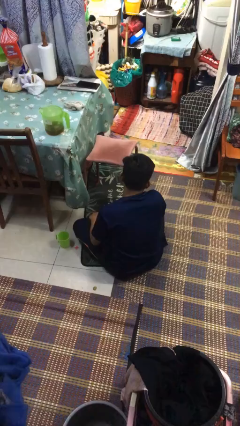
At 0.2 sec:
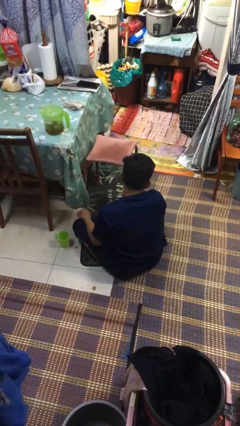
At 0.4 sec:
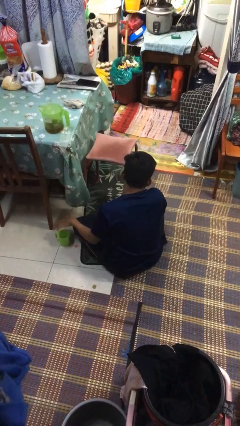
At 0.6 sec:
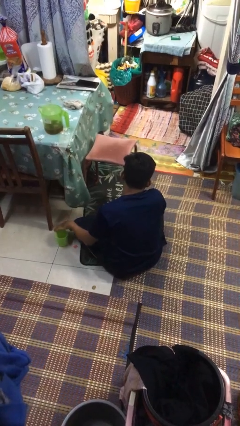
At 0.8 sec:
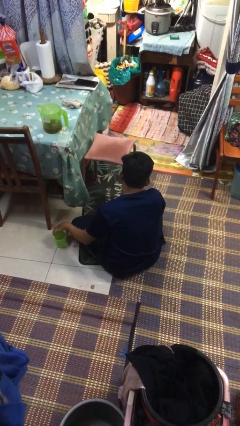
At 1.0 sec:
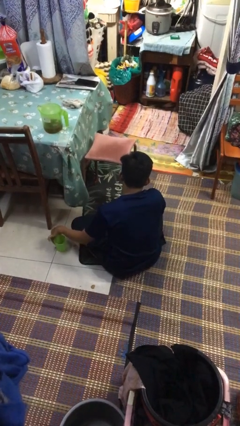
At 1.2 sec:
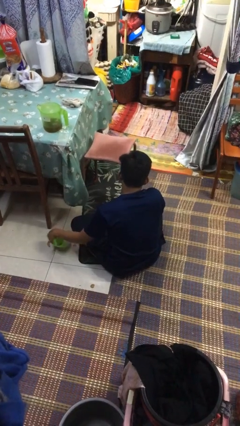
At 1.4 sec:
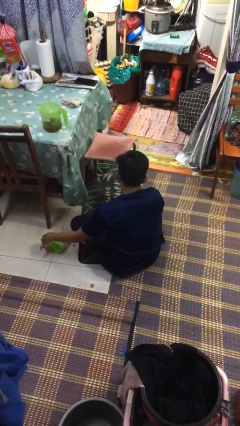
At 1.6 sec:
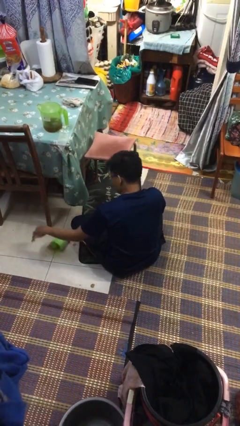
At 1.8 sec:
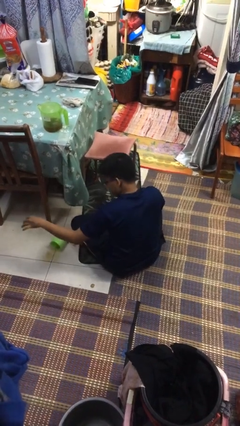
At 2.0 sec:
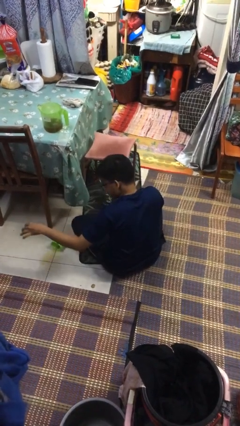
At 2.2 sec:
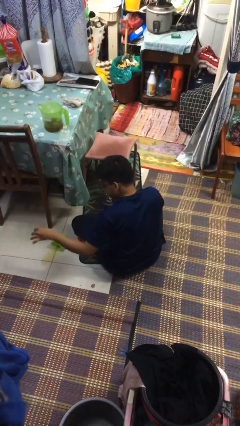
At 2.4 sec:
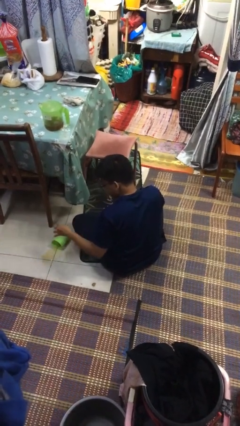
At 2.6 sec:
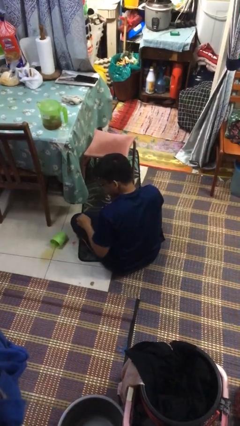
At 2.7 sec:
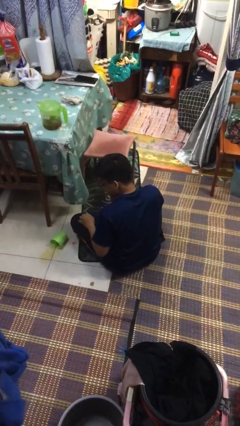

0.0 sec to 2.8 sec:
person spills on floor

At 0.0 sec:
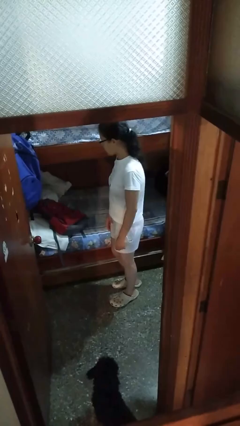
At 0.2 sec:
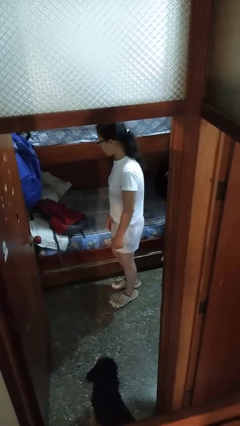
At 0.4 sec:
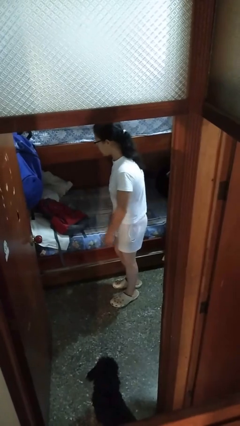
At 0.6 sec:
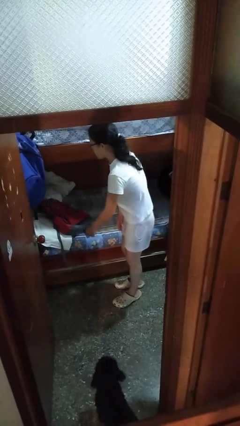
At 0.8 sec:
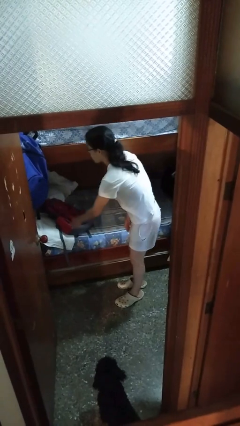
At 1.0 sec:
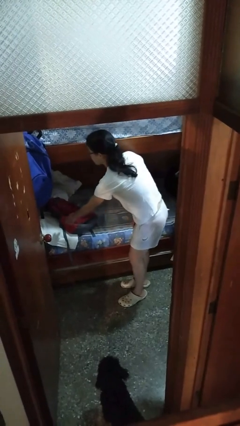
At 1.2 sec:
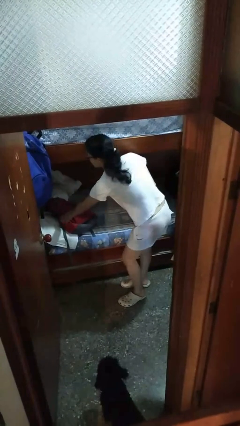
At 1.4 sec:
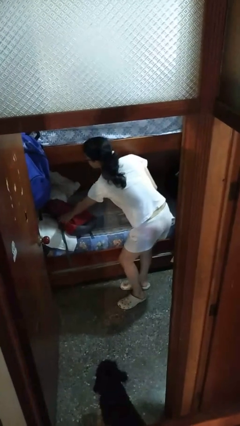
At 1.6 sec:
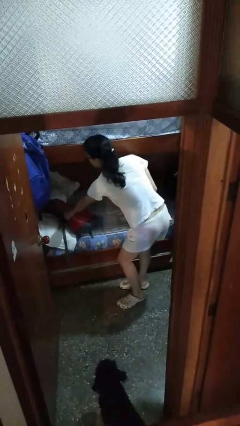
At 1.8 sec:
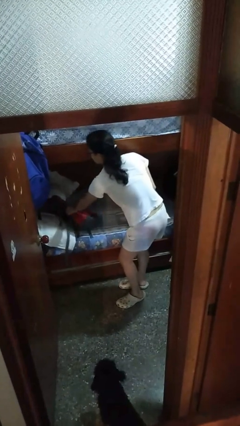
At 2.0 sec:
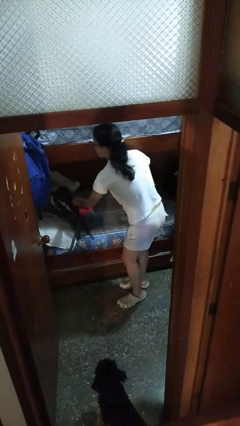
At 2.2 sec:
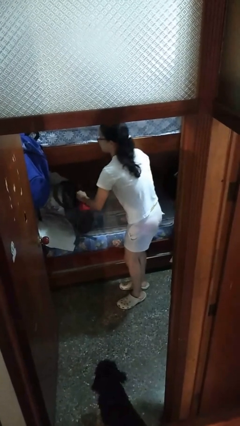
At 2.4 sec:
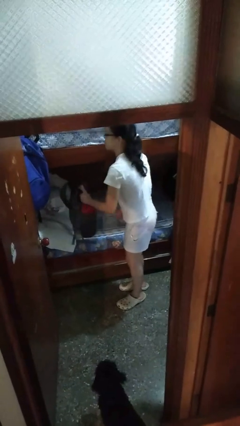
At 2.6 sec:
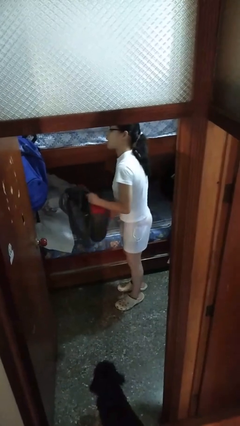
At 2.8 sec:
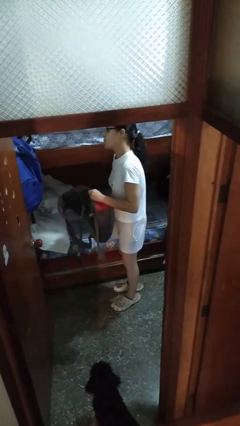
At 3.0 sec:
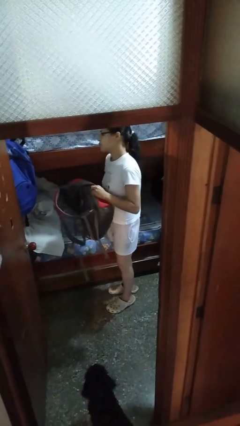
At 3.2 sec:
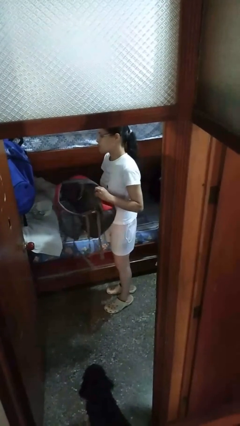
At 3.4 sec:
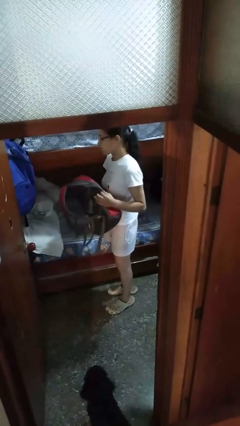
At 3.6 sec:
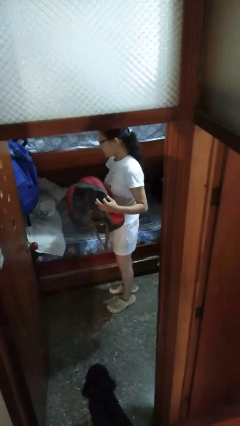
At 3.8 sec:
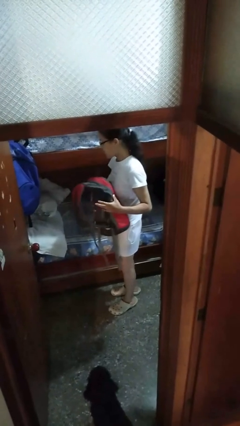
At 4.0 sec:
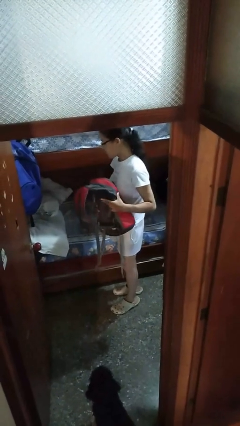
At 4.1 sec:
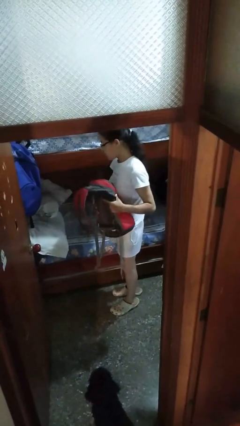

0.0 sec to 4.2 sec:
person picks up object from bed

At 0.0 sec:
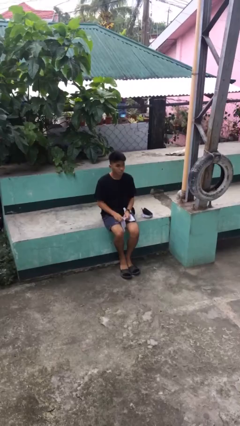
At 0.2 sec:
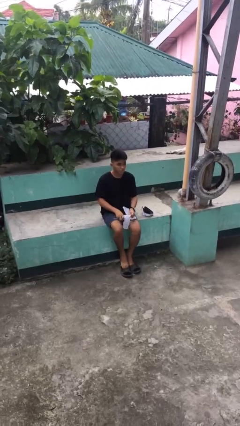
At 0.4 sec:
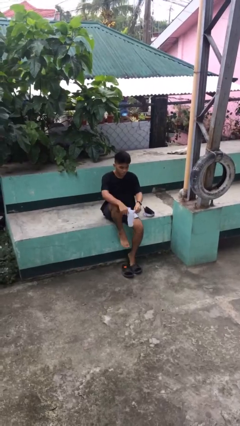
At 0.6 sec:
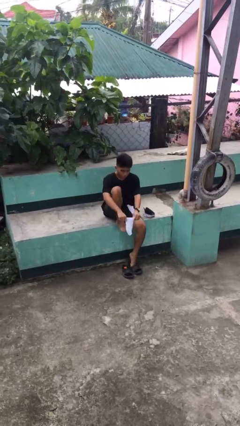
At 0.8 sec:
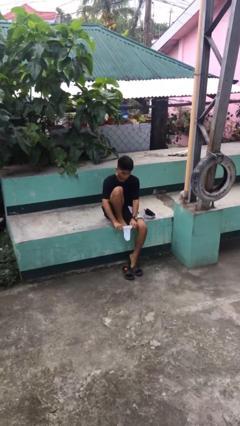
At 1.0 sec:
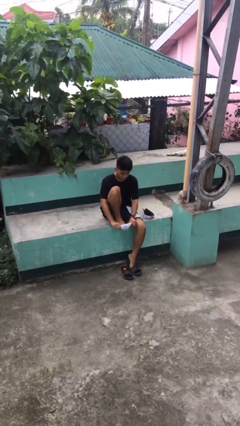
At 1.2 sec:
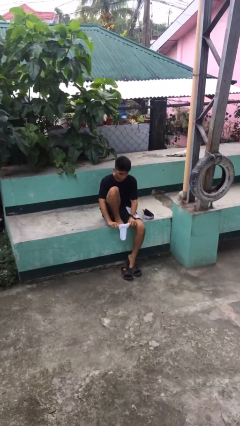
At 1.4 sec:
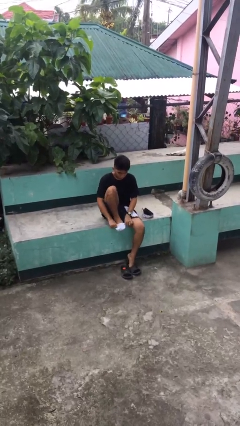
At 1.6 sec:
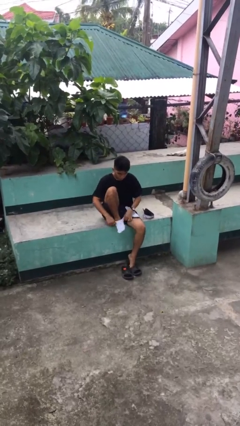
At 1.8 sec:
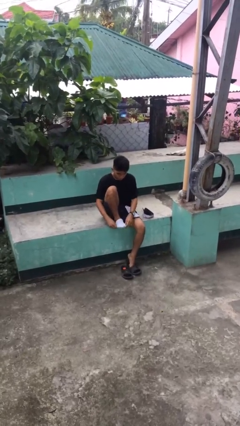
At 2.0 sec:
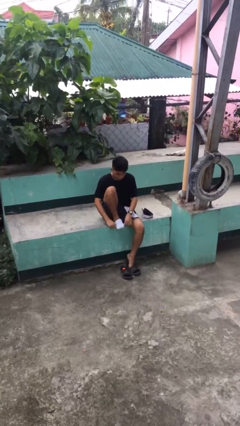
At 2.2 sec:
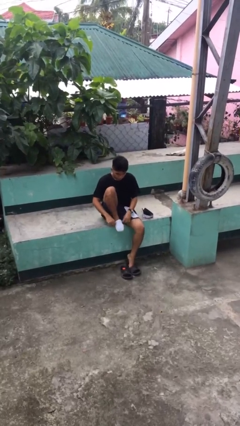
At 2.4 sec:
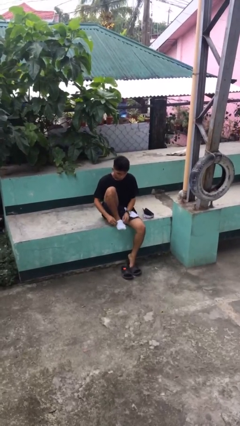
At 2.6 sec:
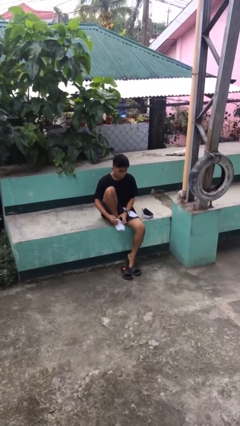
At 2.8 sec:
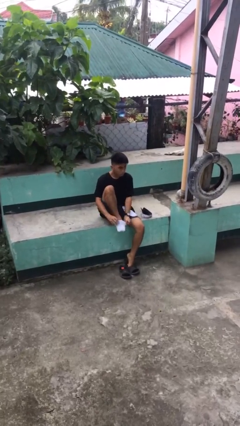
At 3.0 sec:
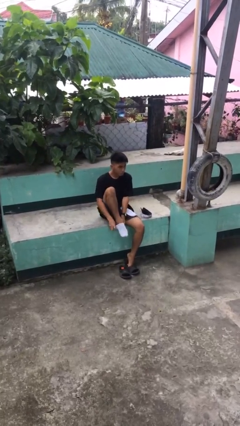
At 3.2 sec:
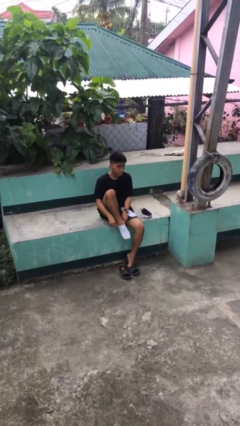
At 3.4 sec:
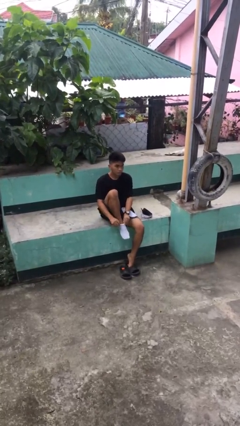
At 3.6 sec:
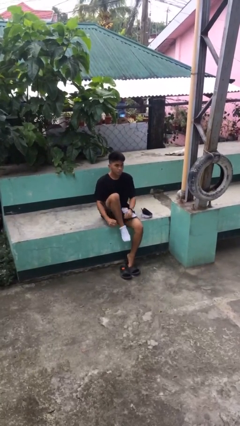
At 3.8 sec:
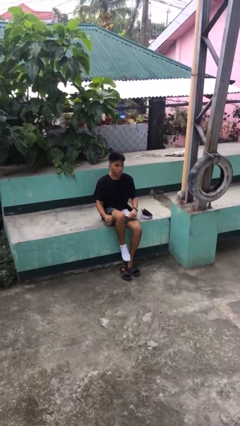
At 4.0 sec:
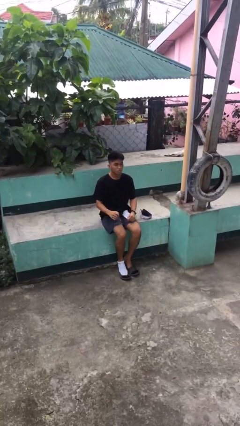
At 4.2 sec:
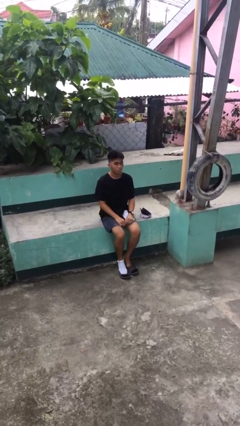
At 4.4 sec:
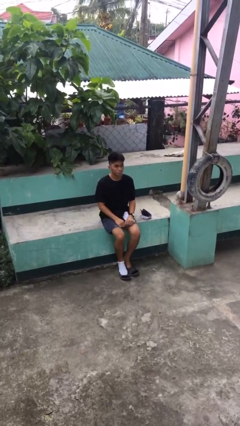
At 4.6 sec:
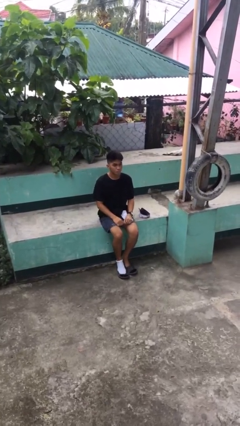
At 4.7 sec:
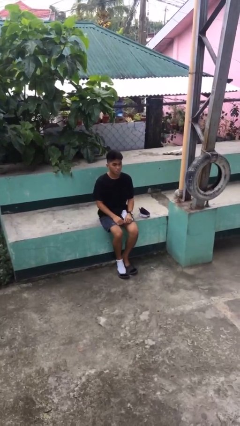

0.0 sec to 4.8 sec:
person puts on socks

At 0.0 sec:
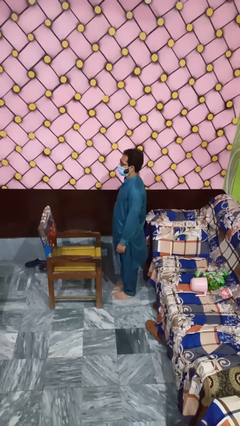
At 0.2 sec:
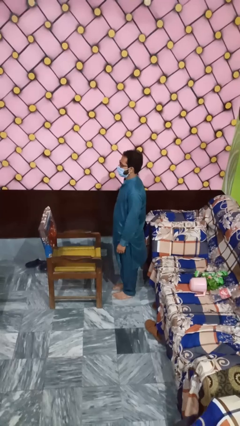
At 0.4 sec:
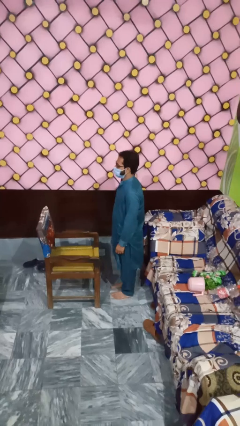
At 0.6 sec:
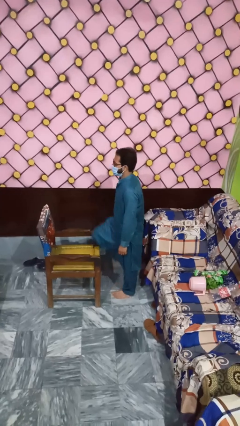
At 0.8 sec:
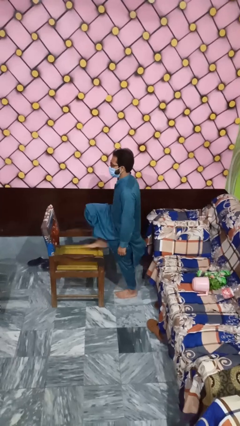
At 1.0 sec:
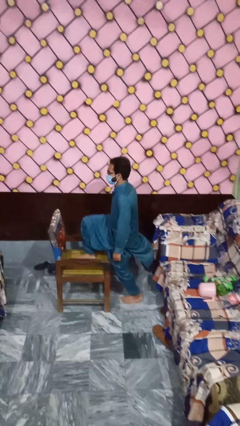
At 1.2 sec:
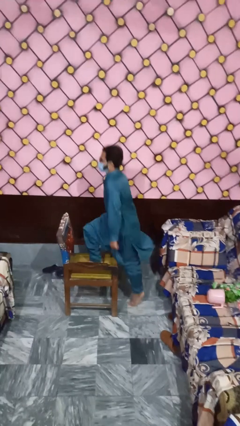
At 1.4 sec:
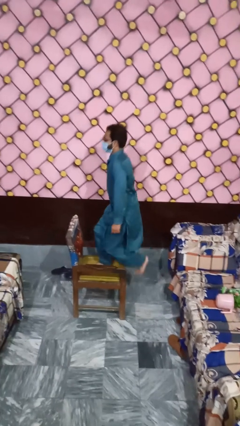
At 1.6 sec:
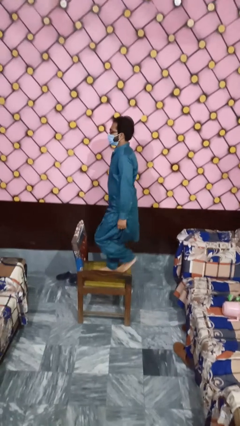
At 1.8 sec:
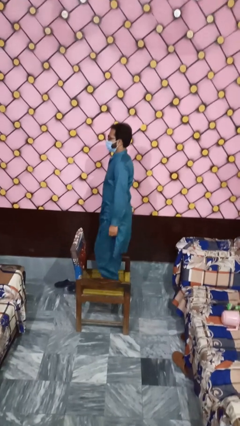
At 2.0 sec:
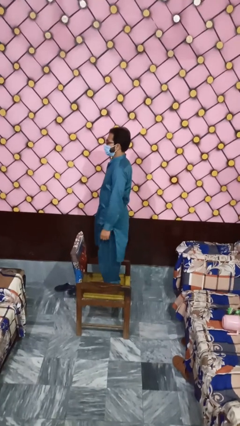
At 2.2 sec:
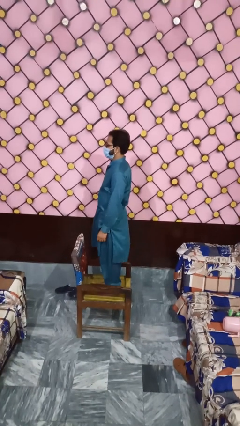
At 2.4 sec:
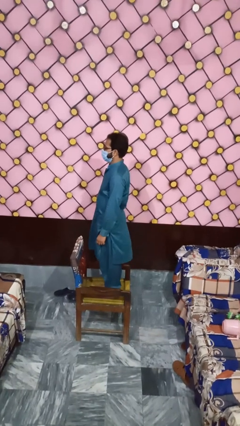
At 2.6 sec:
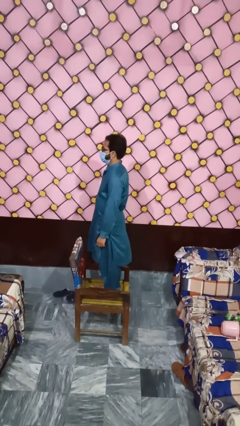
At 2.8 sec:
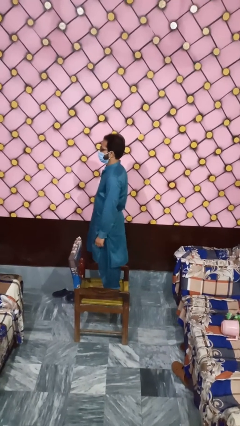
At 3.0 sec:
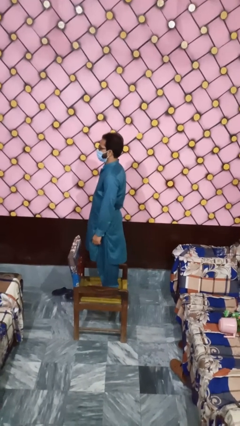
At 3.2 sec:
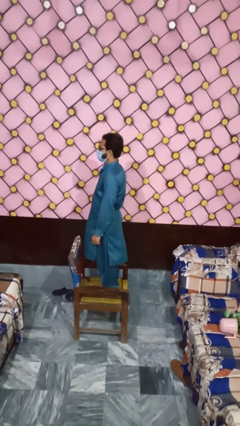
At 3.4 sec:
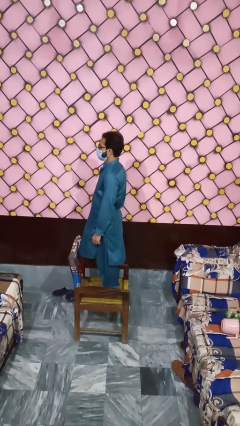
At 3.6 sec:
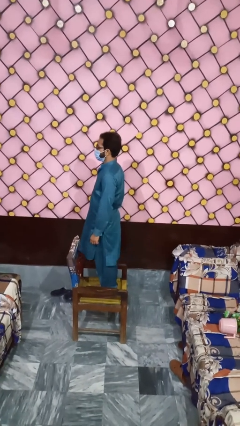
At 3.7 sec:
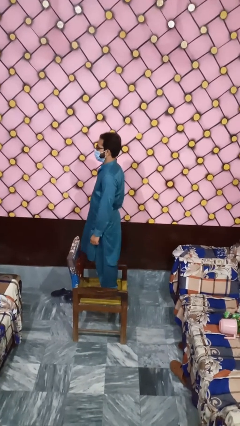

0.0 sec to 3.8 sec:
person climbs on chair

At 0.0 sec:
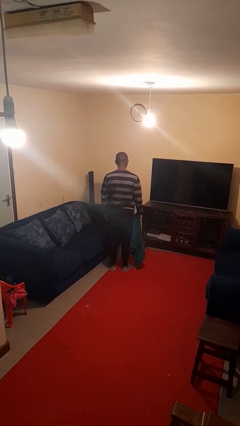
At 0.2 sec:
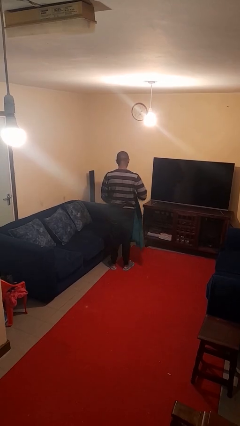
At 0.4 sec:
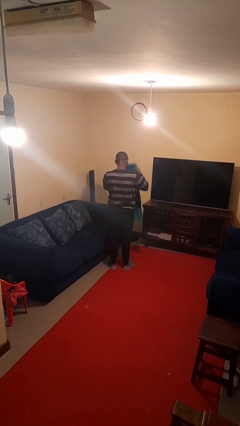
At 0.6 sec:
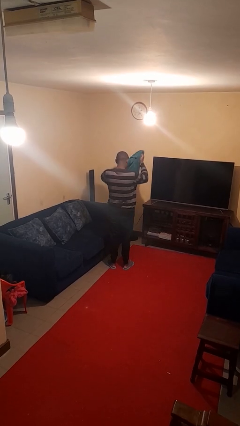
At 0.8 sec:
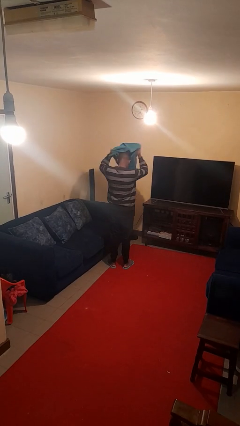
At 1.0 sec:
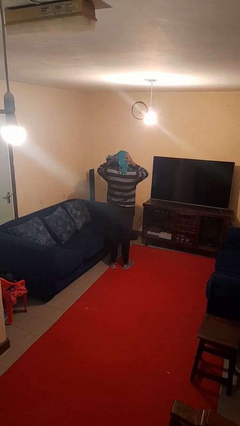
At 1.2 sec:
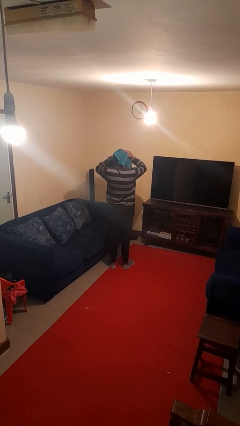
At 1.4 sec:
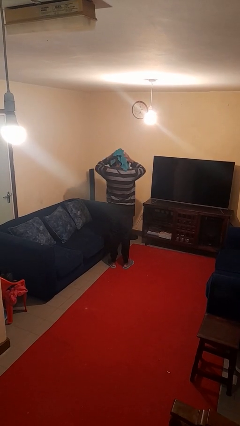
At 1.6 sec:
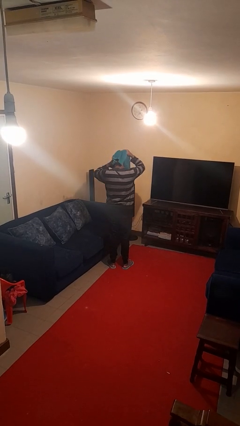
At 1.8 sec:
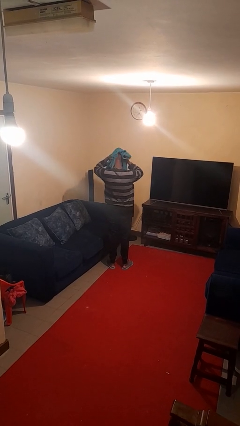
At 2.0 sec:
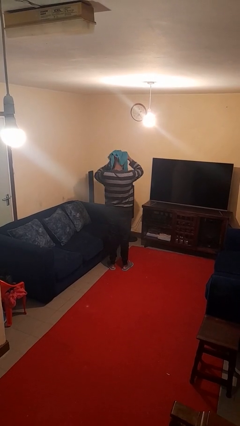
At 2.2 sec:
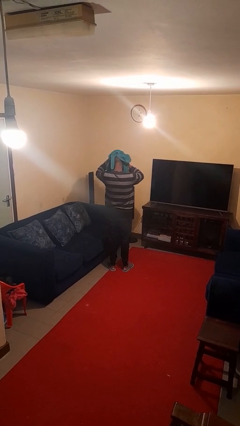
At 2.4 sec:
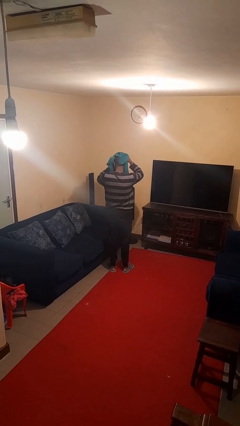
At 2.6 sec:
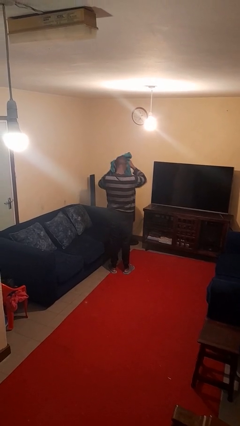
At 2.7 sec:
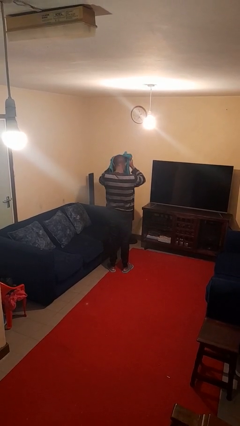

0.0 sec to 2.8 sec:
person dries hair with towel
